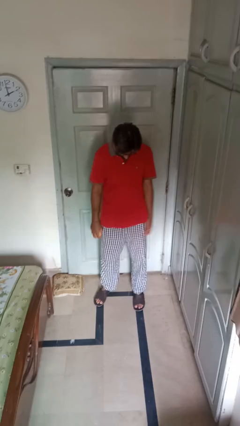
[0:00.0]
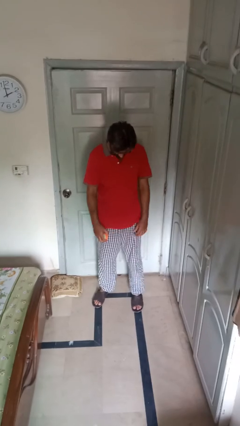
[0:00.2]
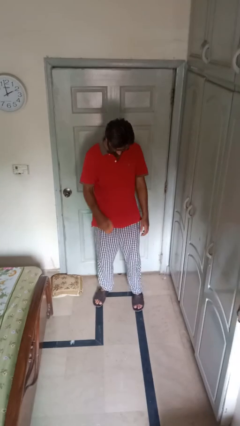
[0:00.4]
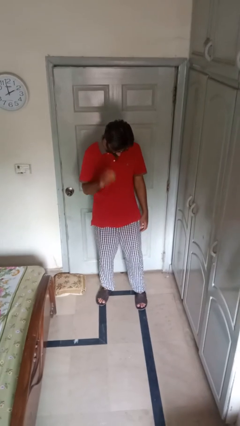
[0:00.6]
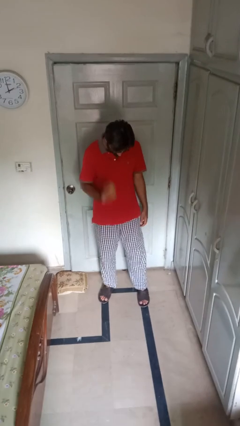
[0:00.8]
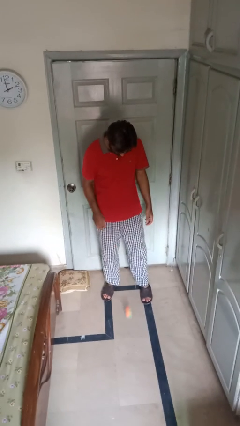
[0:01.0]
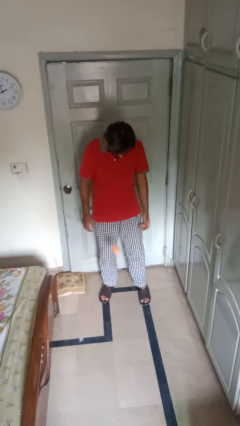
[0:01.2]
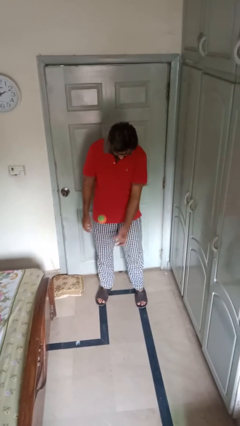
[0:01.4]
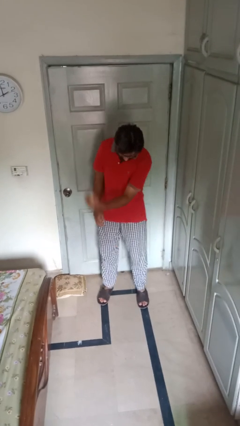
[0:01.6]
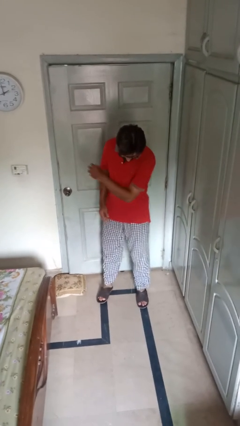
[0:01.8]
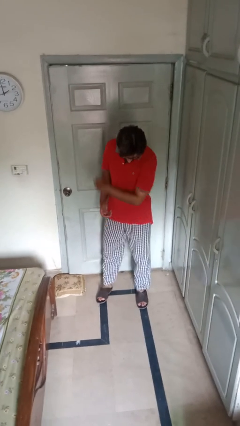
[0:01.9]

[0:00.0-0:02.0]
person bounces ball on floor

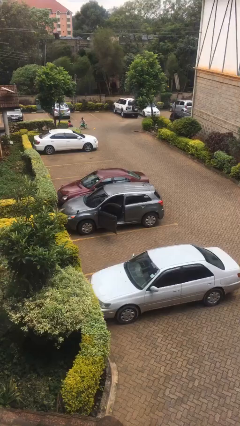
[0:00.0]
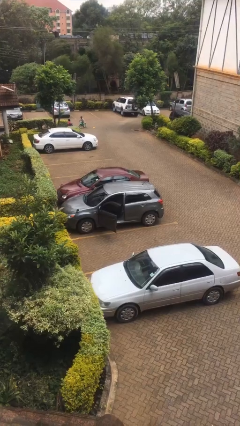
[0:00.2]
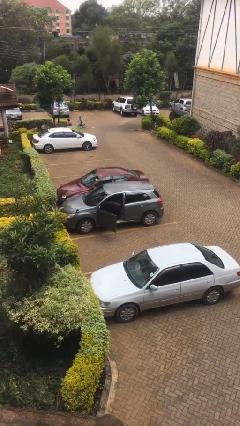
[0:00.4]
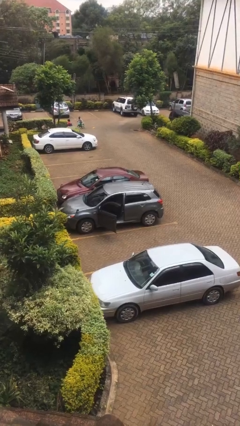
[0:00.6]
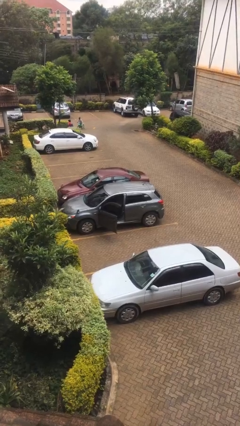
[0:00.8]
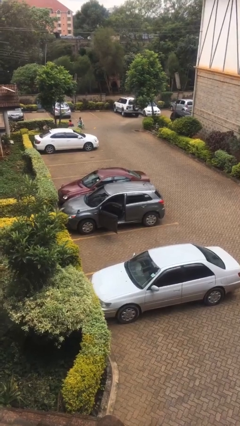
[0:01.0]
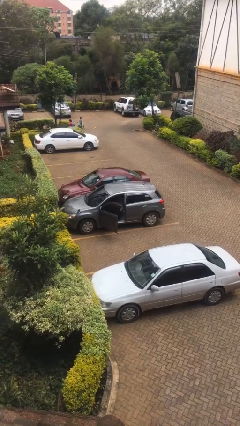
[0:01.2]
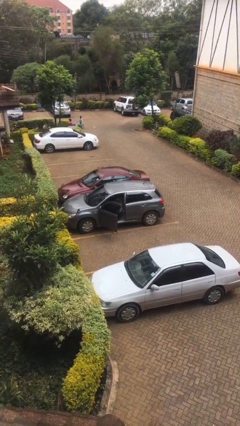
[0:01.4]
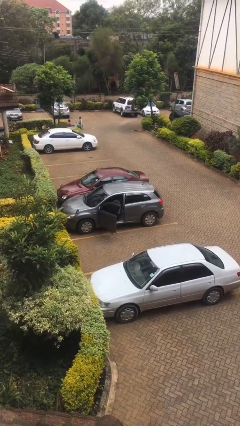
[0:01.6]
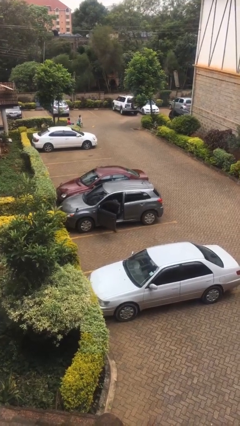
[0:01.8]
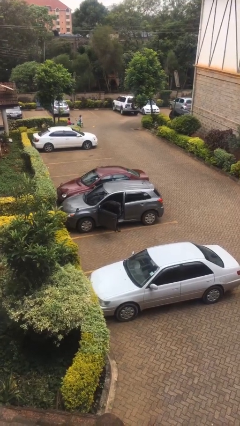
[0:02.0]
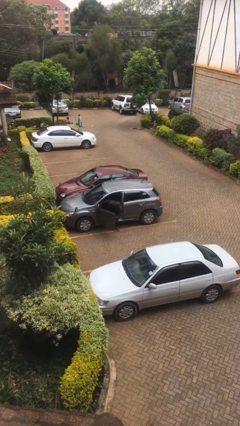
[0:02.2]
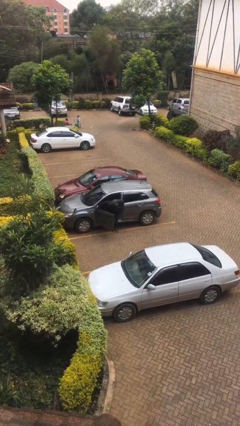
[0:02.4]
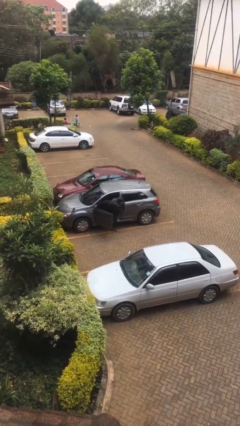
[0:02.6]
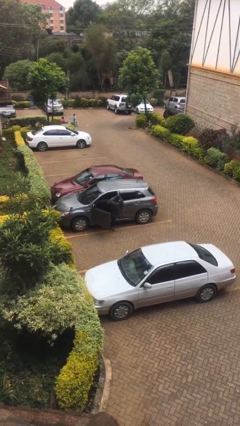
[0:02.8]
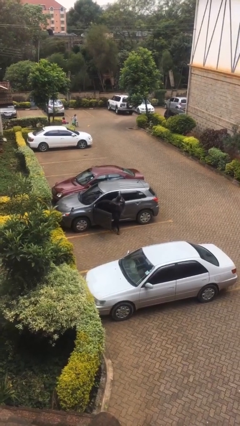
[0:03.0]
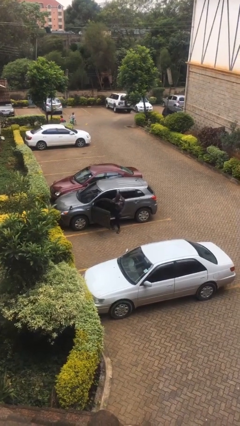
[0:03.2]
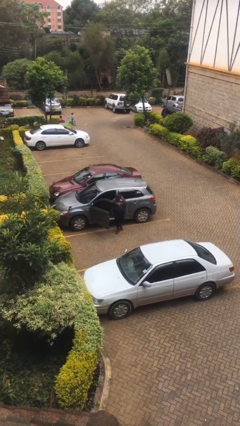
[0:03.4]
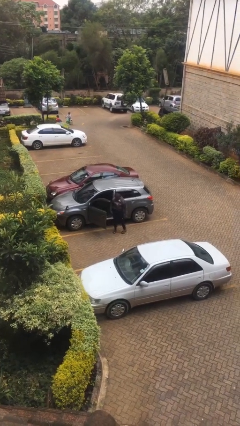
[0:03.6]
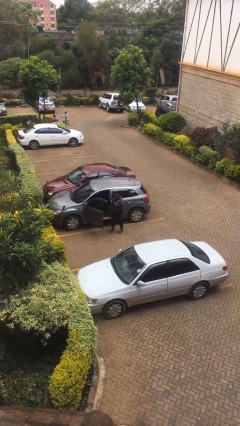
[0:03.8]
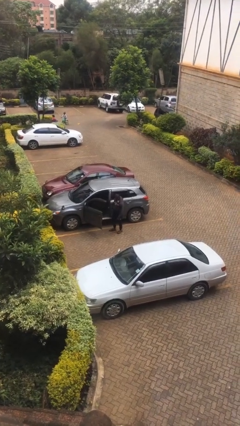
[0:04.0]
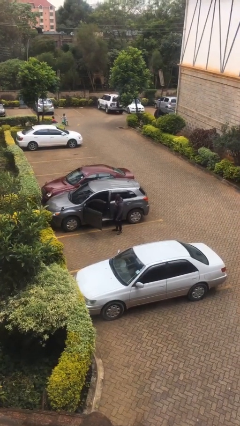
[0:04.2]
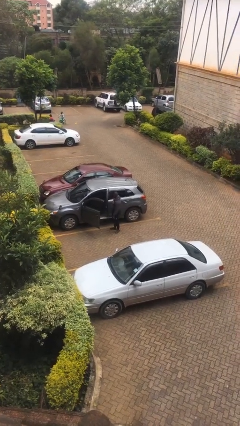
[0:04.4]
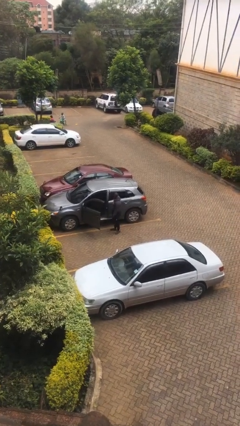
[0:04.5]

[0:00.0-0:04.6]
person exits car

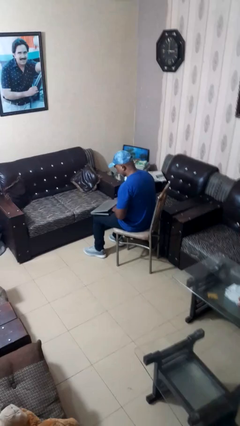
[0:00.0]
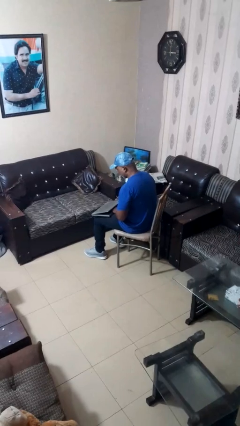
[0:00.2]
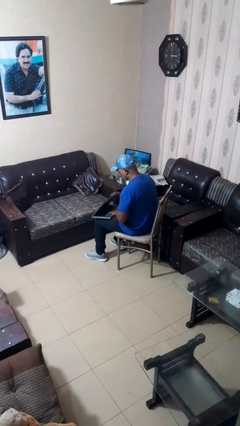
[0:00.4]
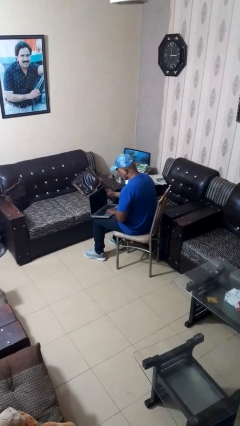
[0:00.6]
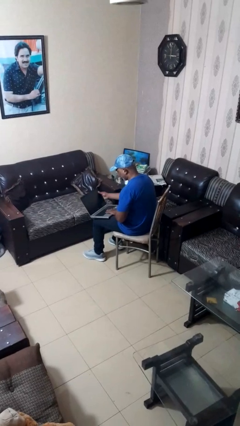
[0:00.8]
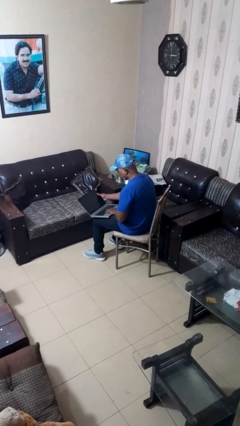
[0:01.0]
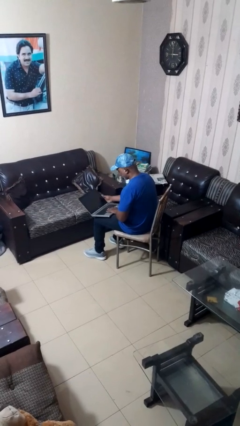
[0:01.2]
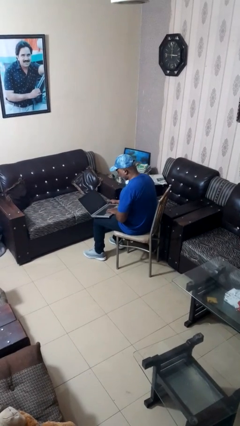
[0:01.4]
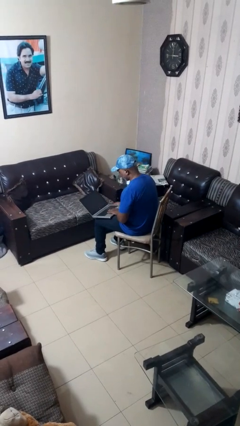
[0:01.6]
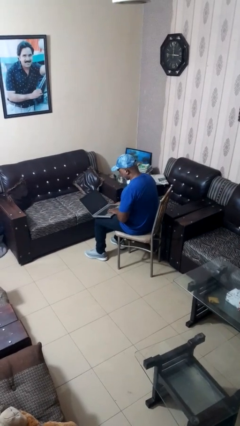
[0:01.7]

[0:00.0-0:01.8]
person opens laptop

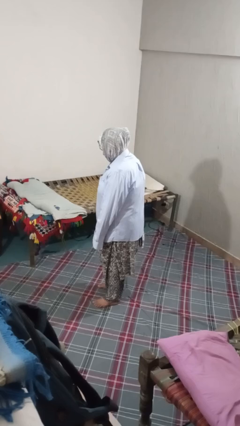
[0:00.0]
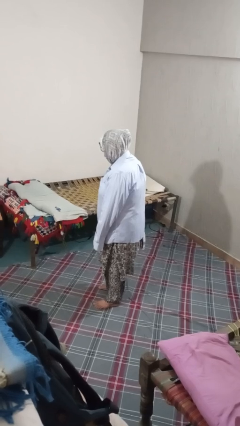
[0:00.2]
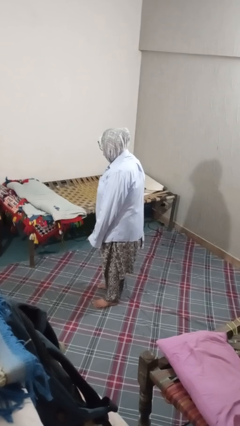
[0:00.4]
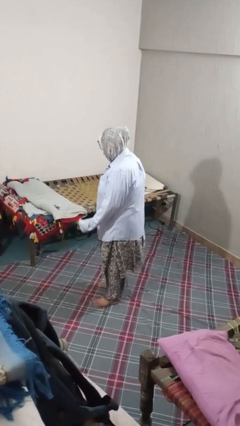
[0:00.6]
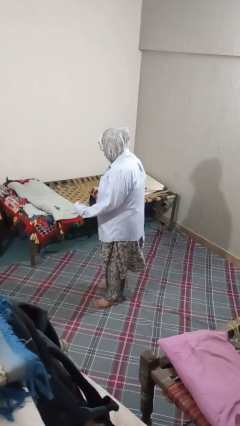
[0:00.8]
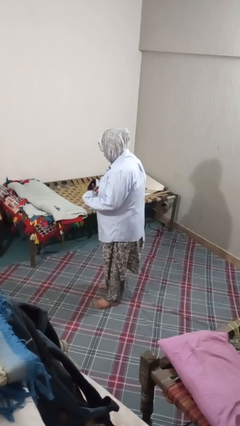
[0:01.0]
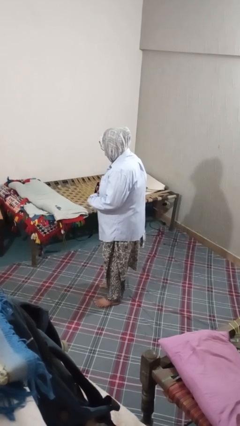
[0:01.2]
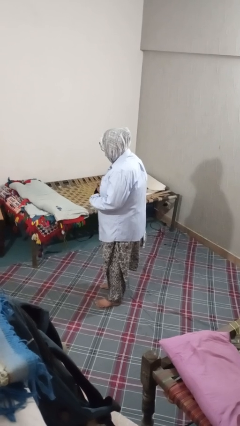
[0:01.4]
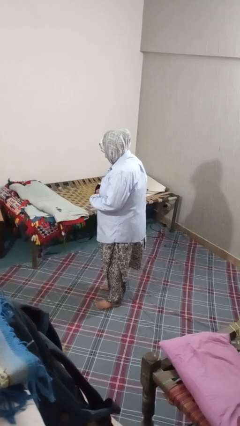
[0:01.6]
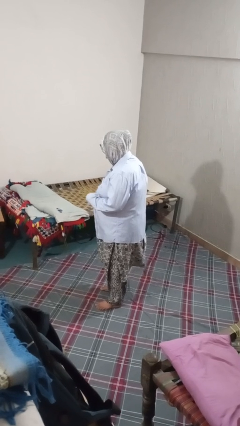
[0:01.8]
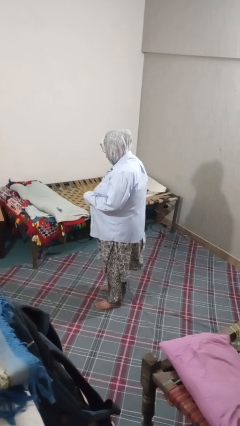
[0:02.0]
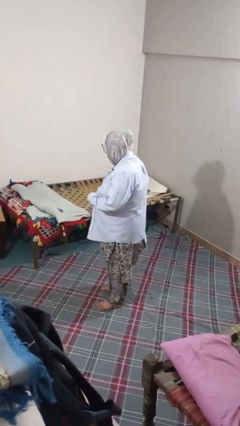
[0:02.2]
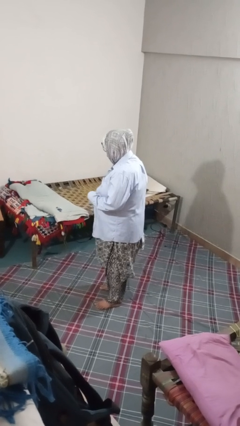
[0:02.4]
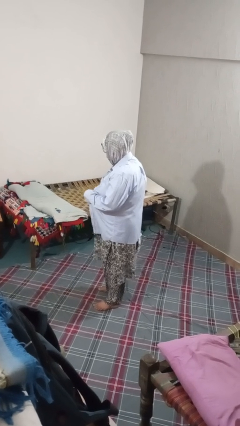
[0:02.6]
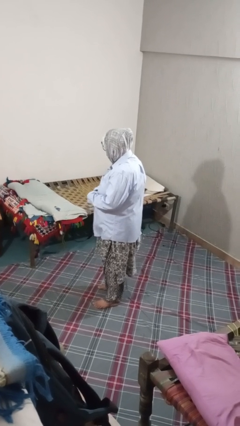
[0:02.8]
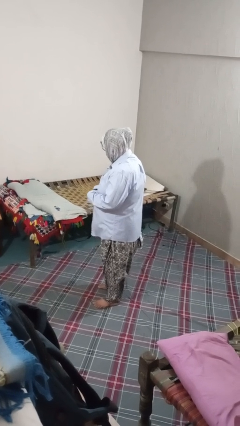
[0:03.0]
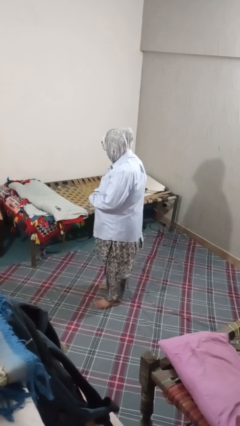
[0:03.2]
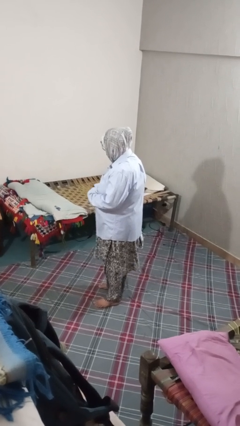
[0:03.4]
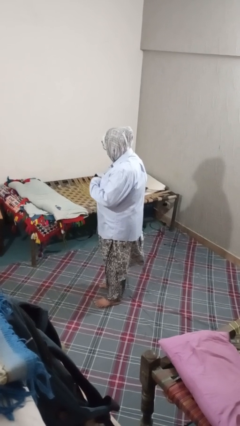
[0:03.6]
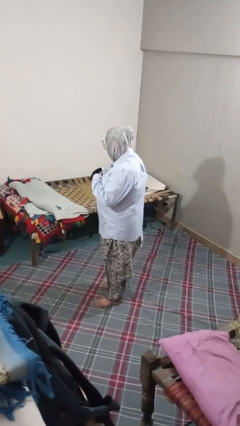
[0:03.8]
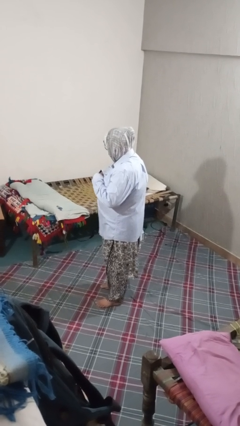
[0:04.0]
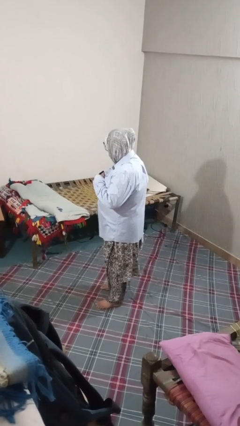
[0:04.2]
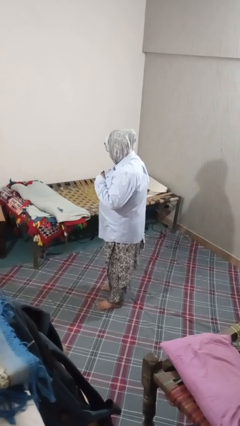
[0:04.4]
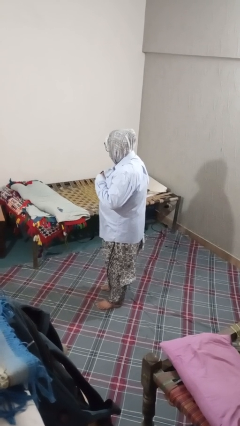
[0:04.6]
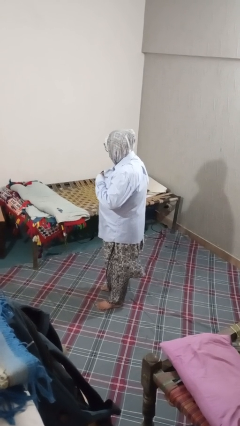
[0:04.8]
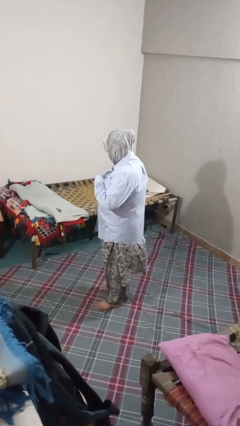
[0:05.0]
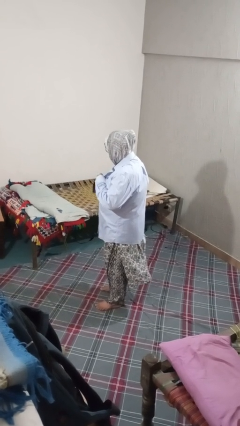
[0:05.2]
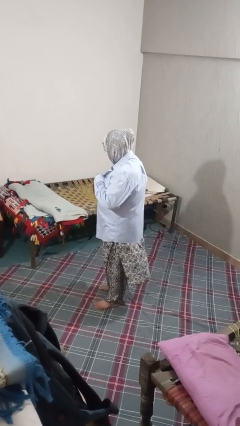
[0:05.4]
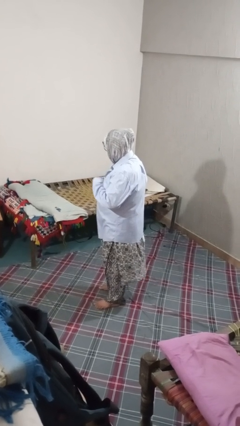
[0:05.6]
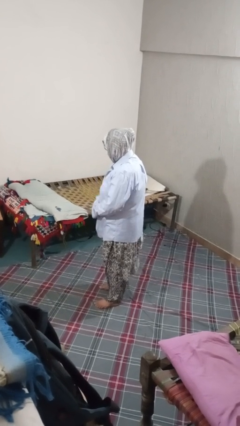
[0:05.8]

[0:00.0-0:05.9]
person unbuttons shirt

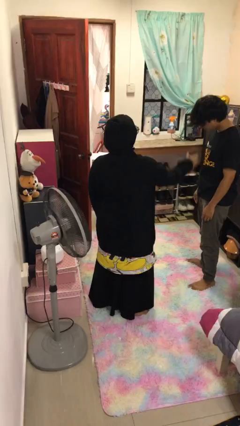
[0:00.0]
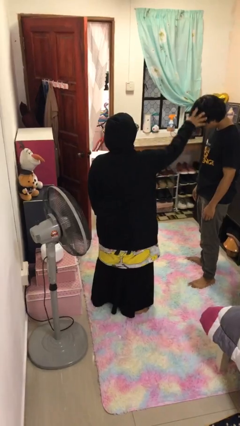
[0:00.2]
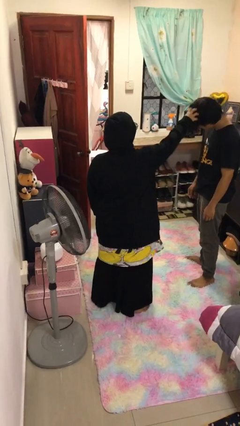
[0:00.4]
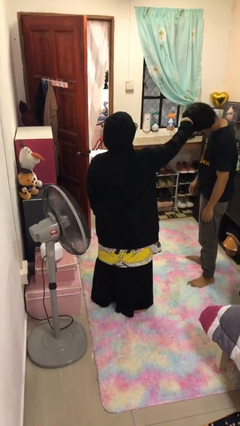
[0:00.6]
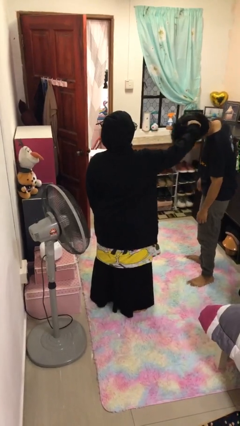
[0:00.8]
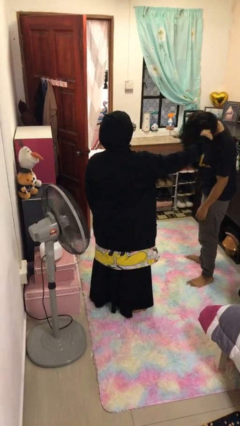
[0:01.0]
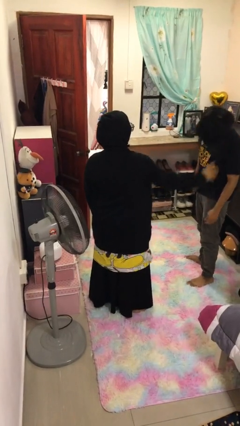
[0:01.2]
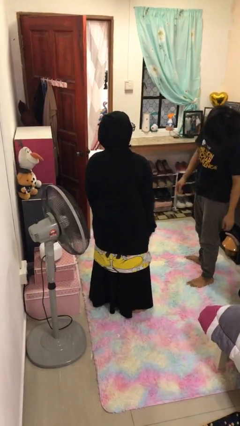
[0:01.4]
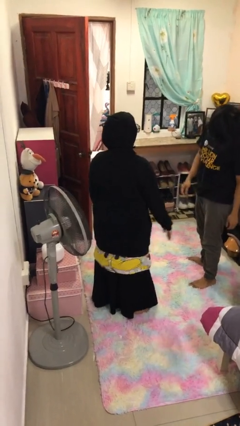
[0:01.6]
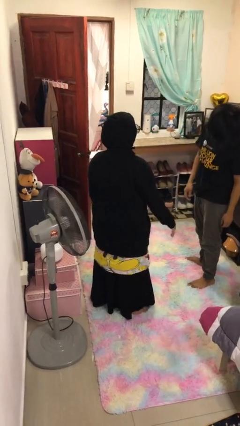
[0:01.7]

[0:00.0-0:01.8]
person grabs person by hair

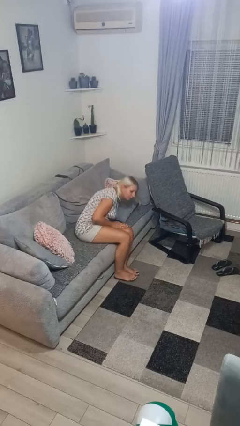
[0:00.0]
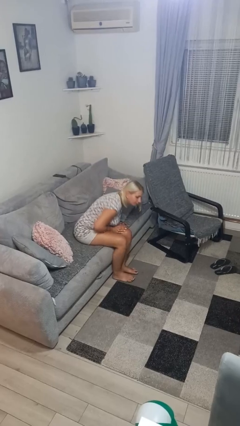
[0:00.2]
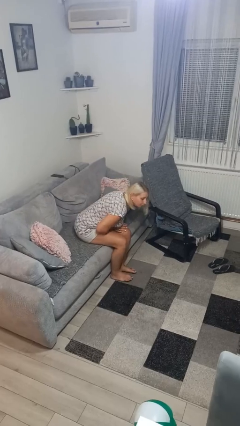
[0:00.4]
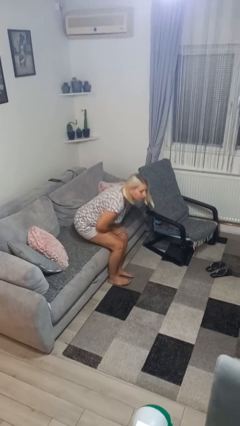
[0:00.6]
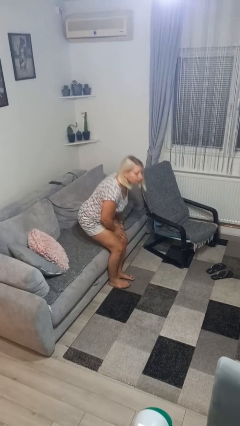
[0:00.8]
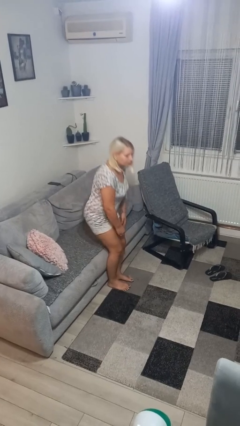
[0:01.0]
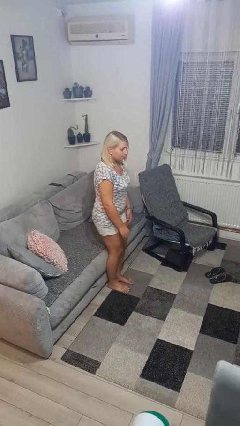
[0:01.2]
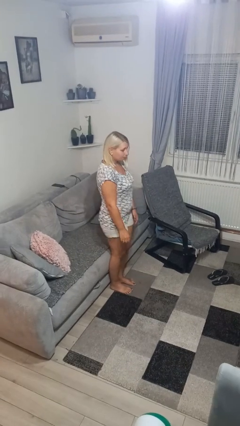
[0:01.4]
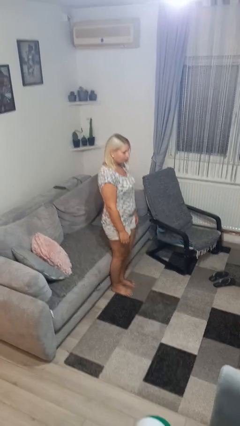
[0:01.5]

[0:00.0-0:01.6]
person stands up
